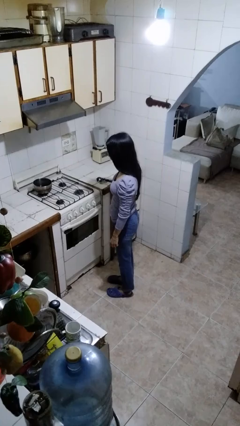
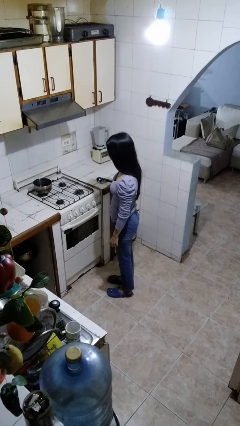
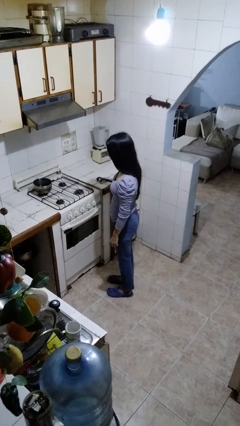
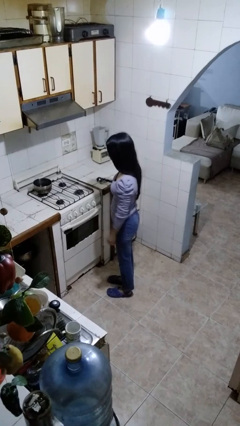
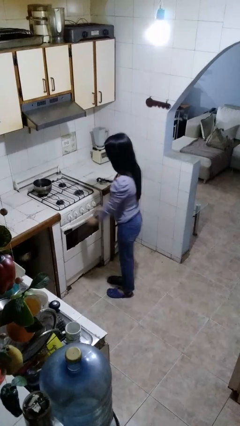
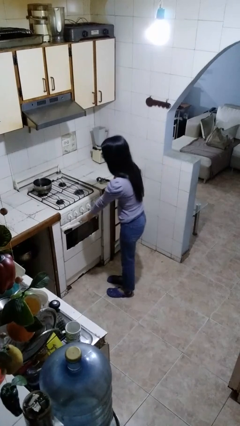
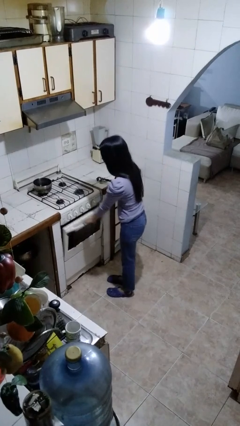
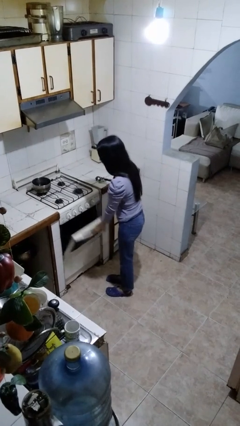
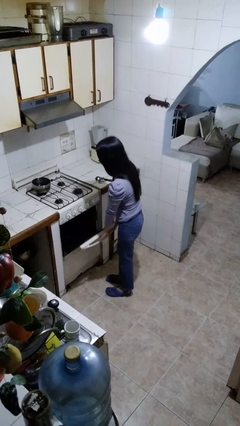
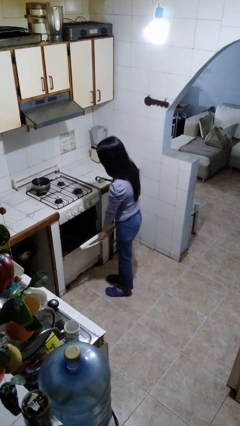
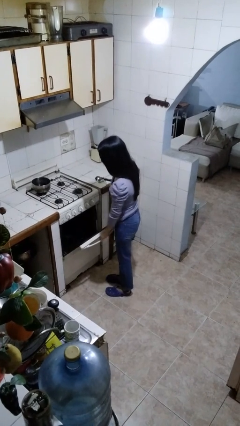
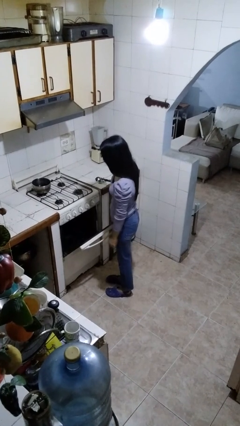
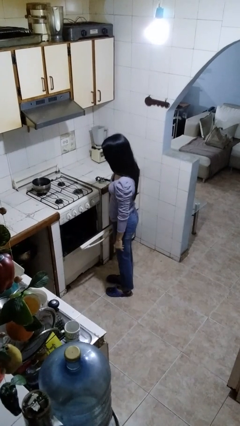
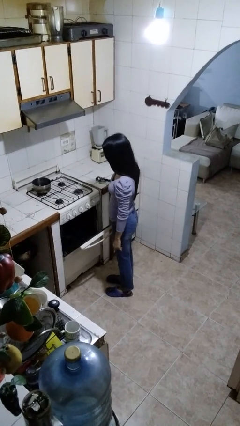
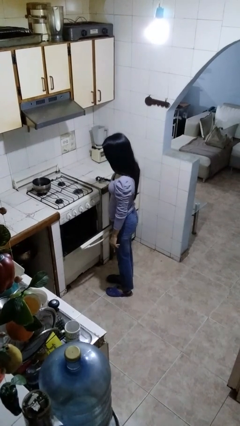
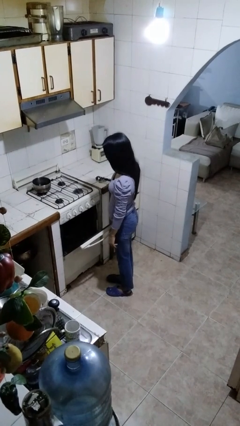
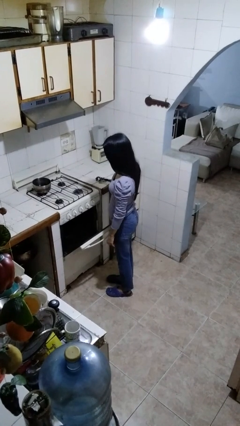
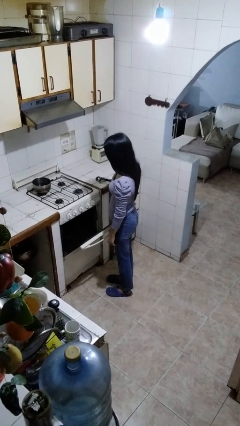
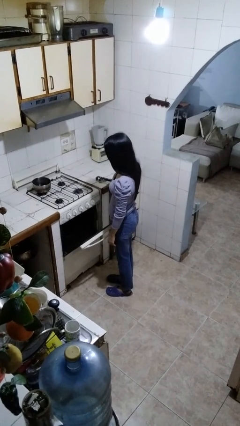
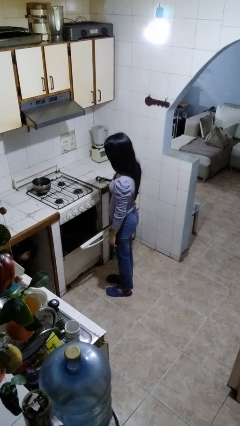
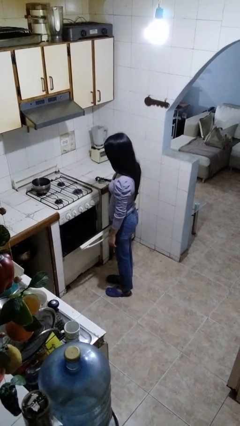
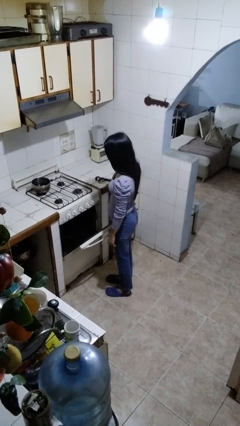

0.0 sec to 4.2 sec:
person opens oven door

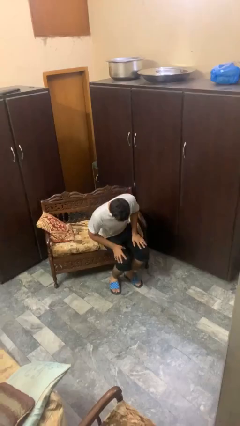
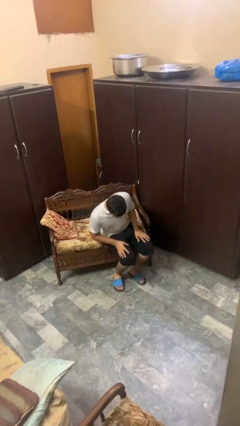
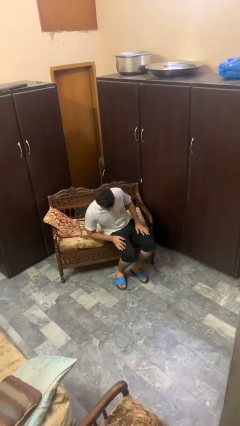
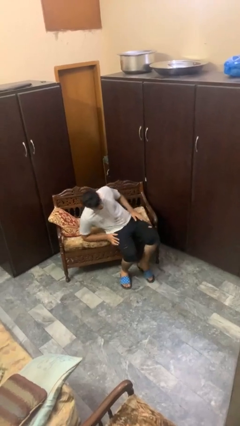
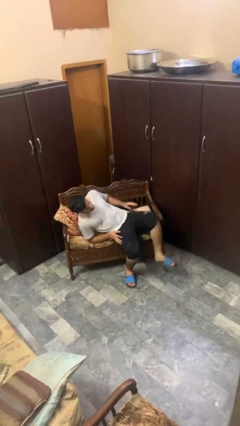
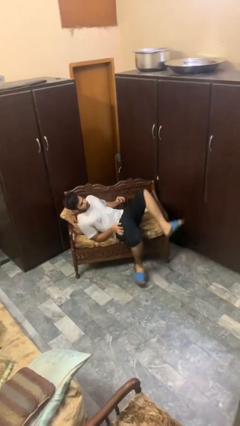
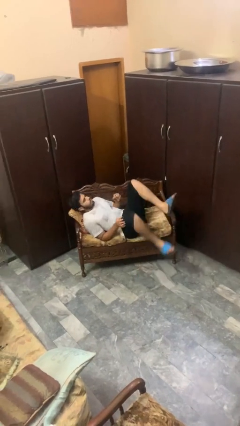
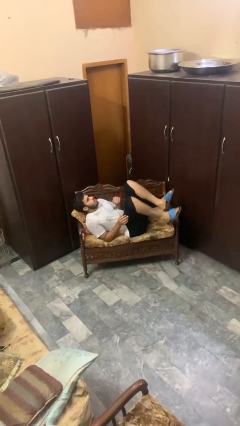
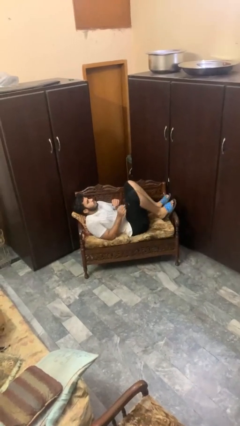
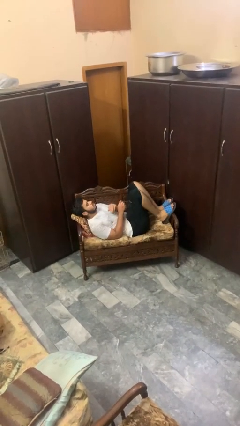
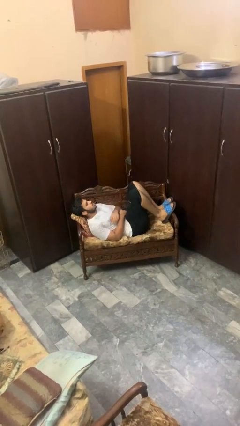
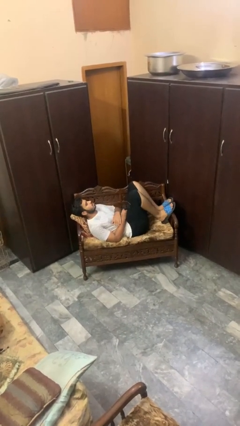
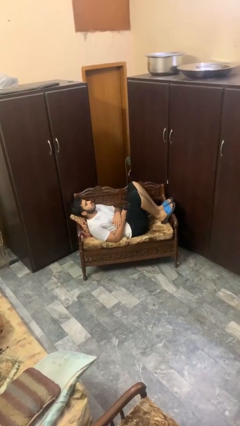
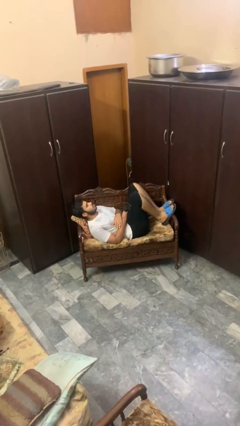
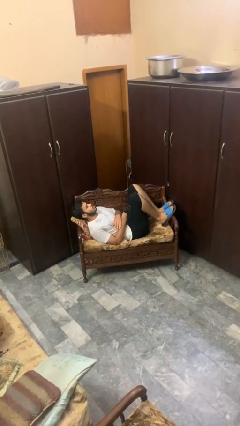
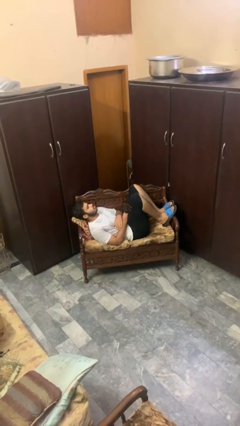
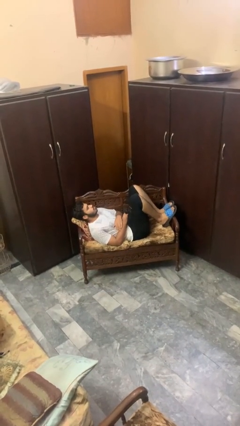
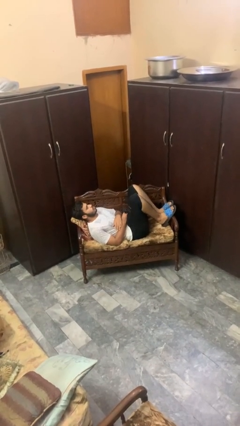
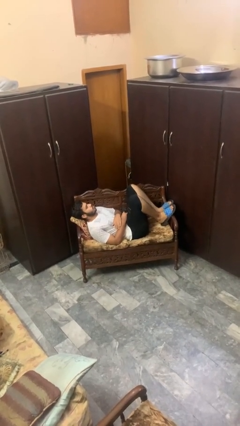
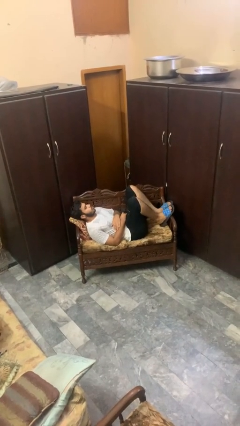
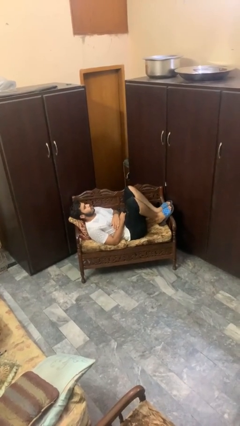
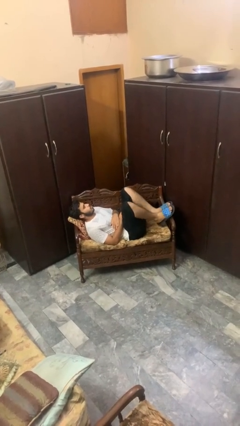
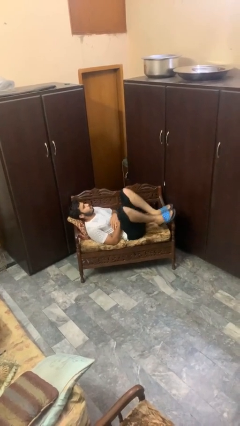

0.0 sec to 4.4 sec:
person lies down on couch

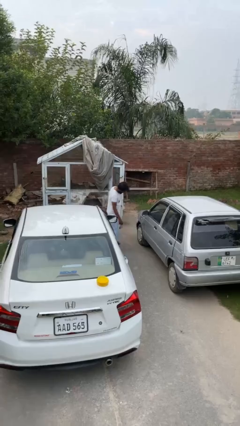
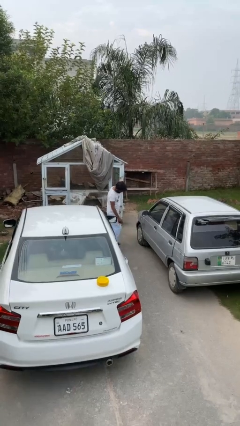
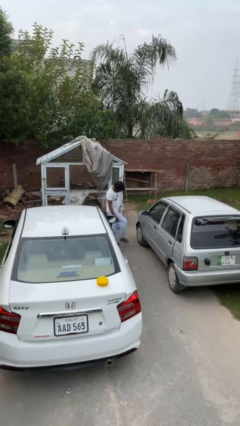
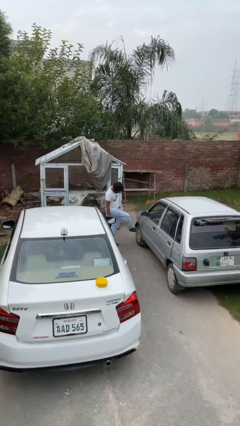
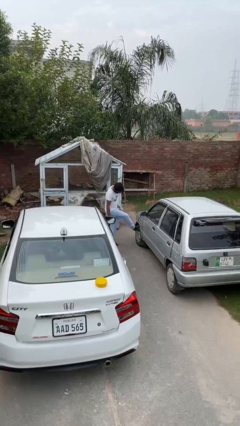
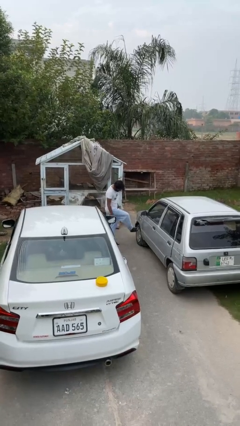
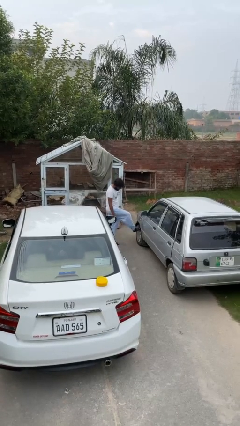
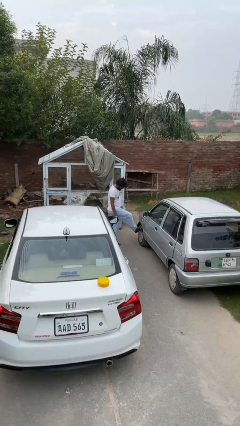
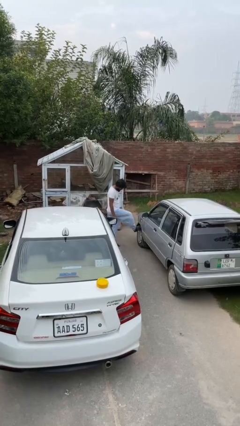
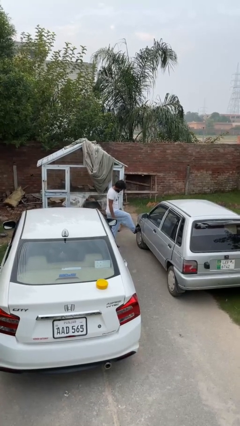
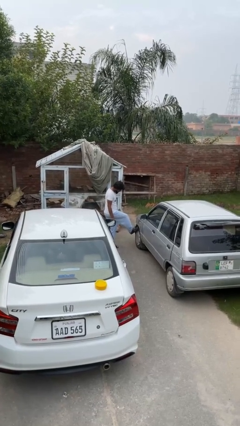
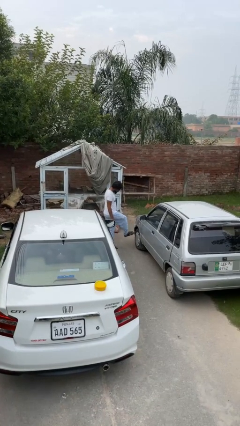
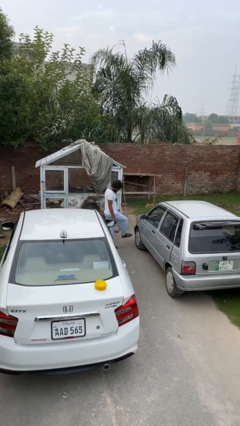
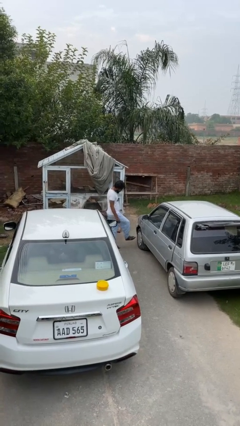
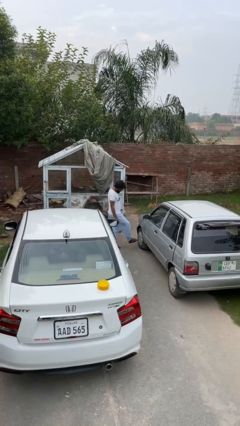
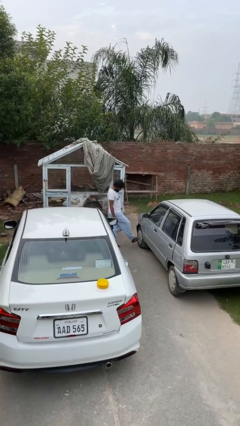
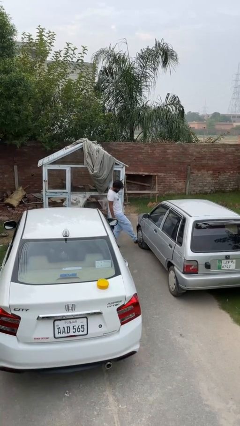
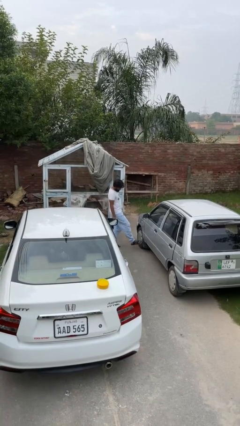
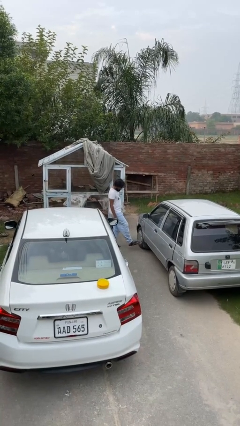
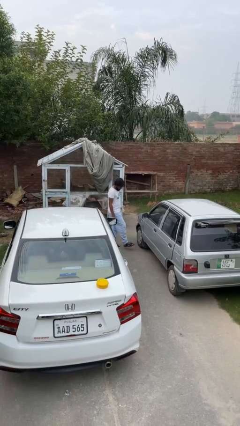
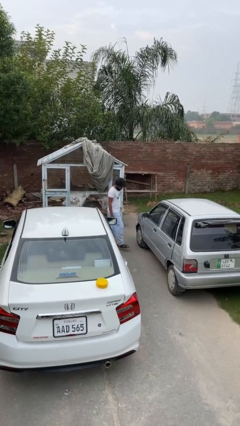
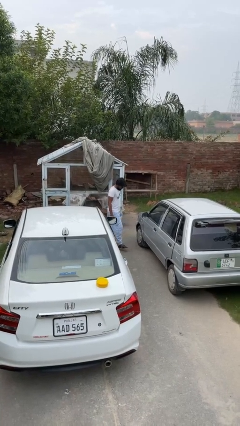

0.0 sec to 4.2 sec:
person kicks car tires

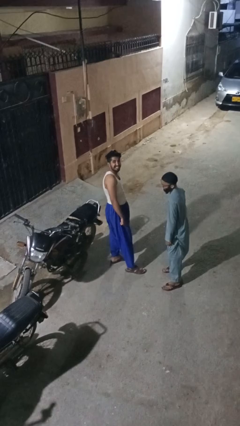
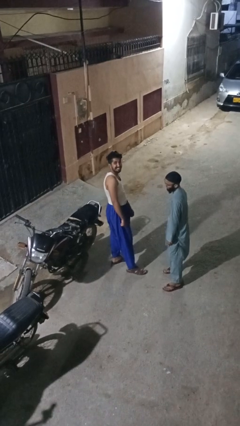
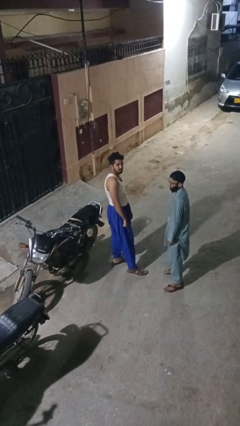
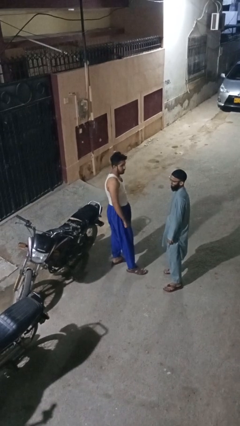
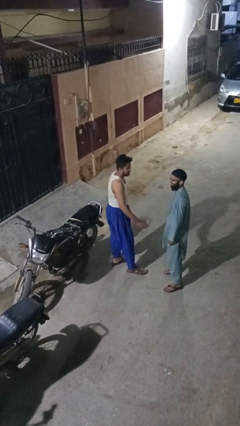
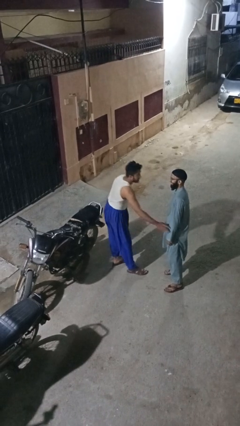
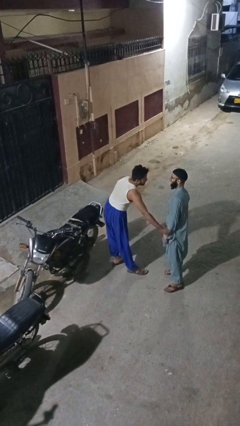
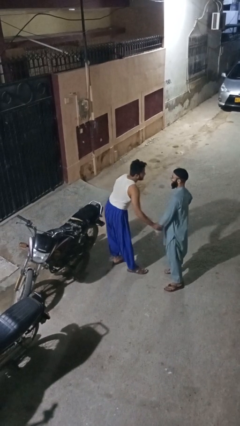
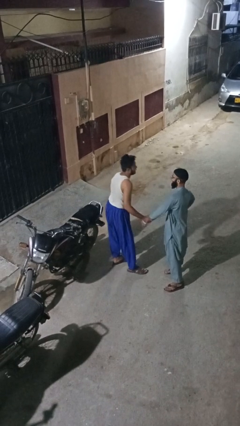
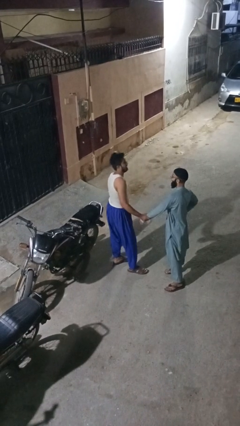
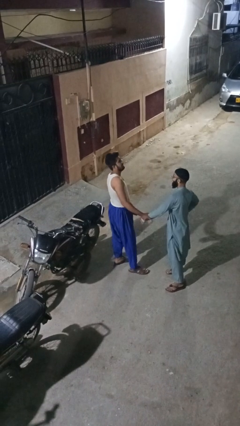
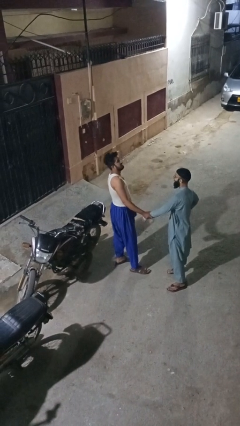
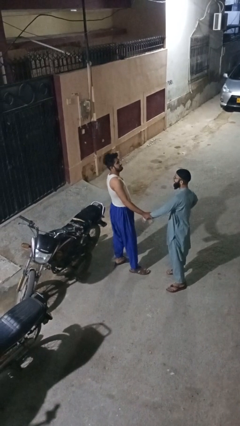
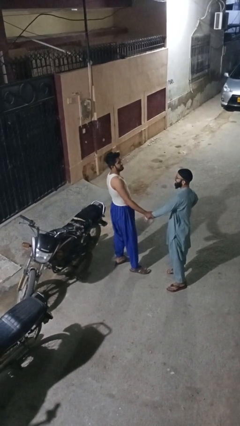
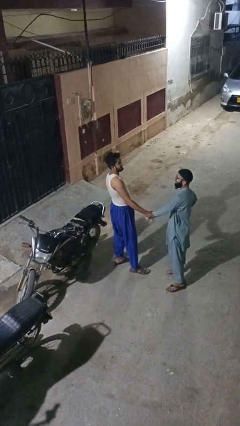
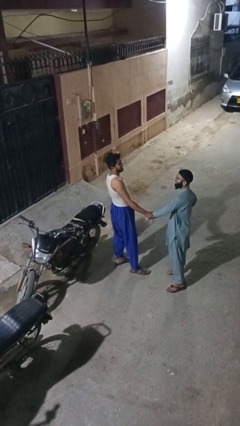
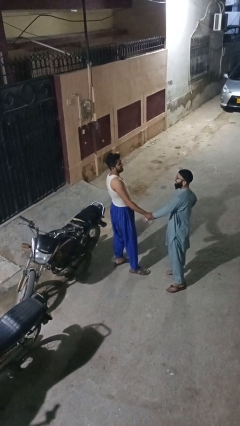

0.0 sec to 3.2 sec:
person grabs person by forearm

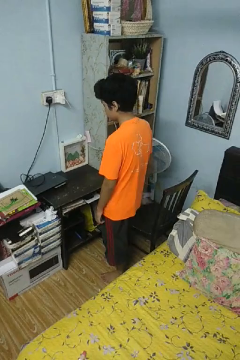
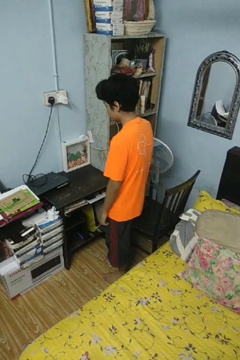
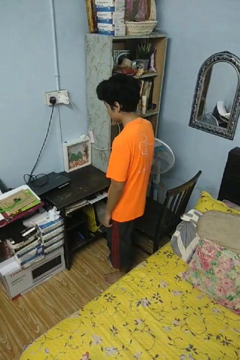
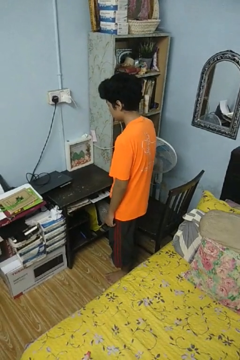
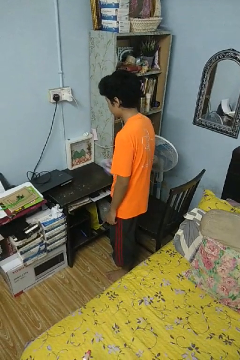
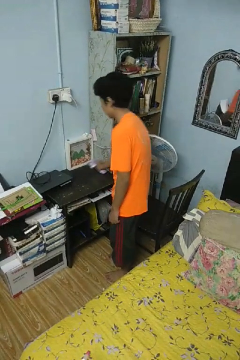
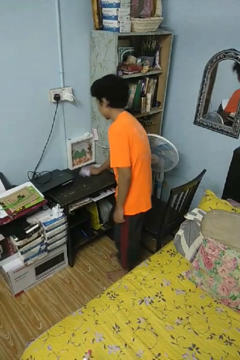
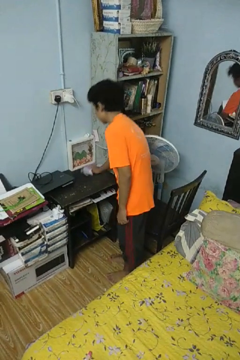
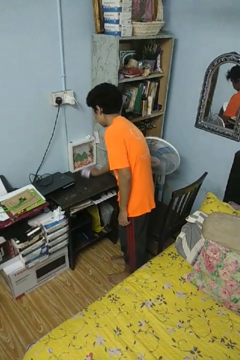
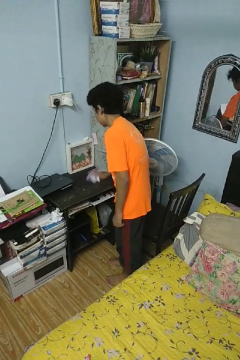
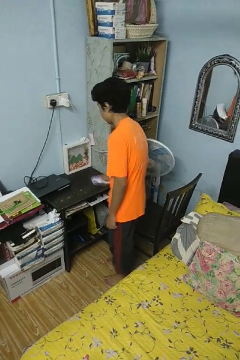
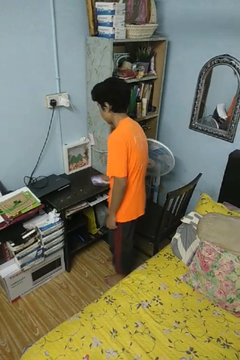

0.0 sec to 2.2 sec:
person cleans table with rag
